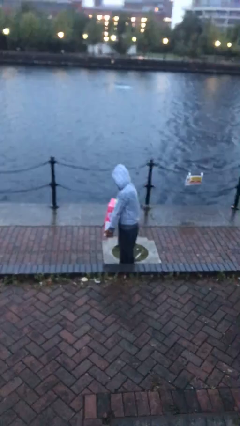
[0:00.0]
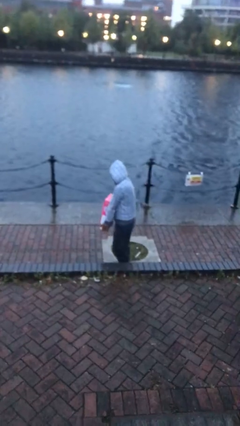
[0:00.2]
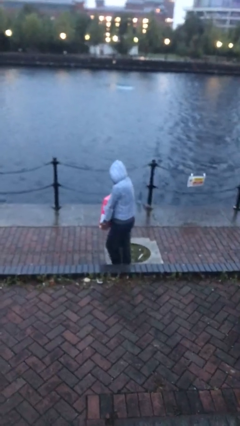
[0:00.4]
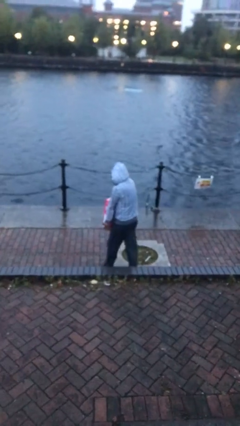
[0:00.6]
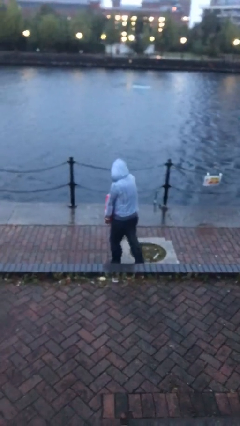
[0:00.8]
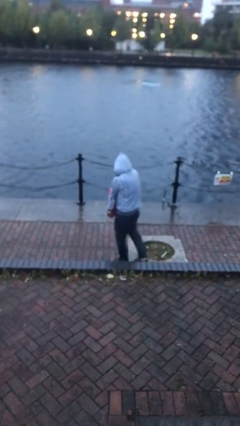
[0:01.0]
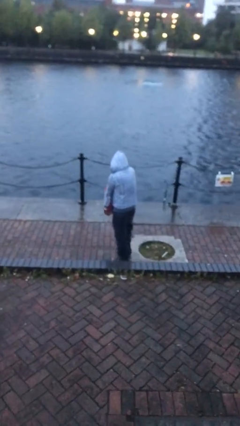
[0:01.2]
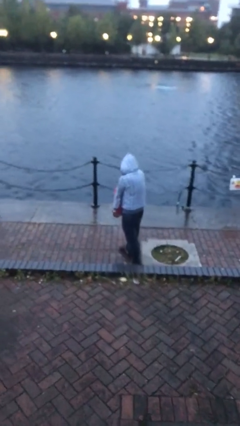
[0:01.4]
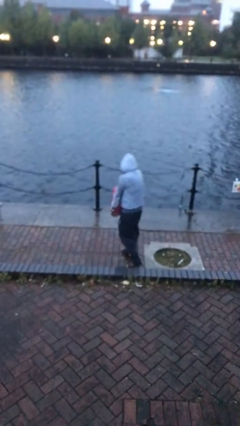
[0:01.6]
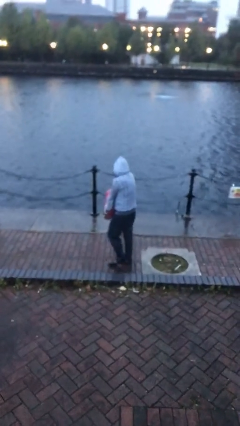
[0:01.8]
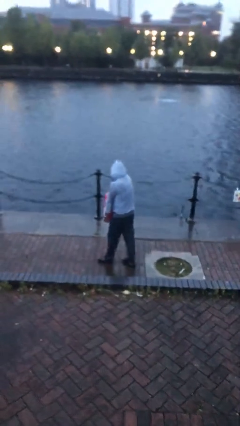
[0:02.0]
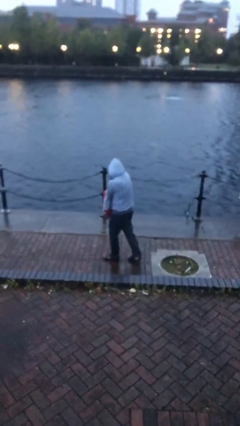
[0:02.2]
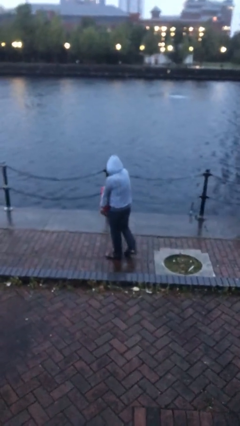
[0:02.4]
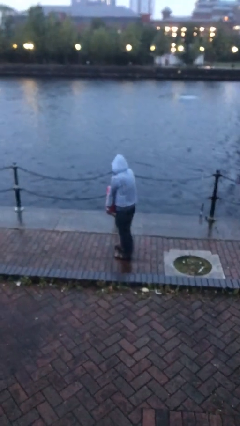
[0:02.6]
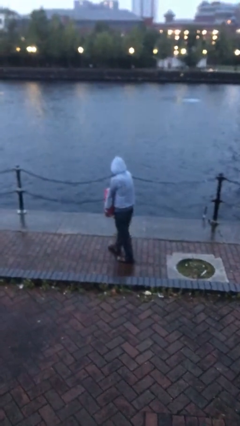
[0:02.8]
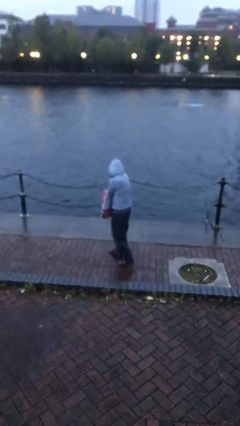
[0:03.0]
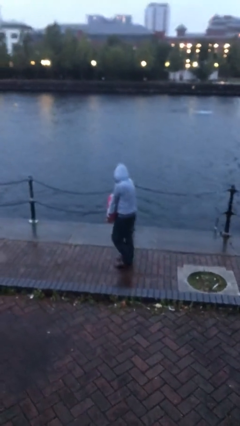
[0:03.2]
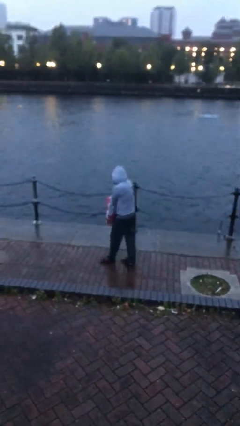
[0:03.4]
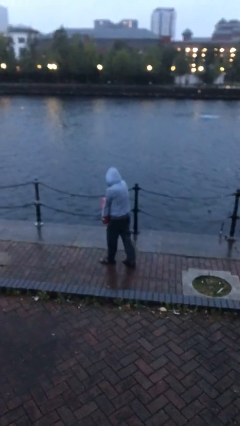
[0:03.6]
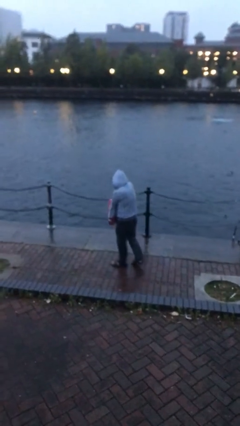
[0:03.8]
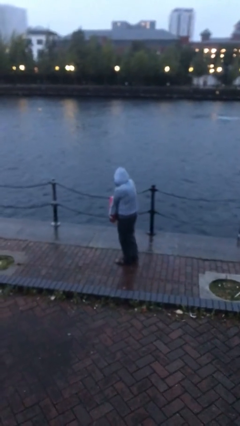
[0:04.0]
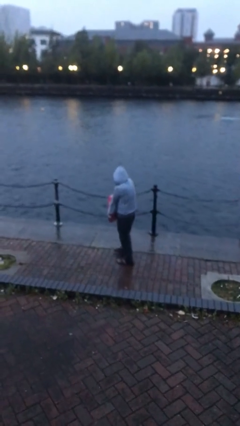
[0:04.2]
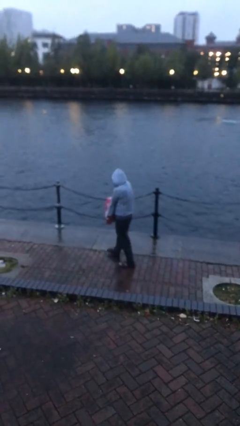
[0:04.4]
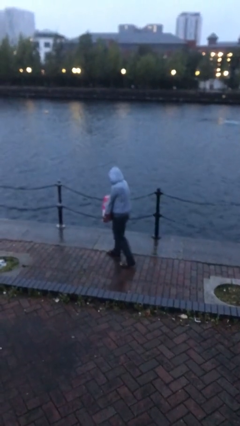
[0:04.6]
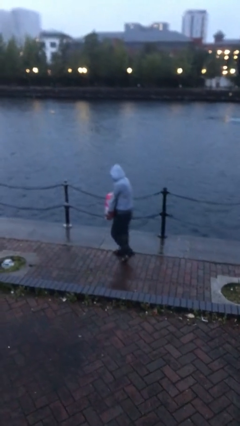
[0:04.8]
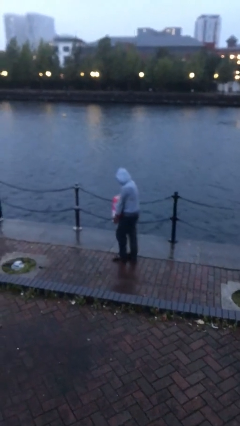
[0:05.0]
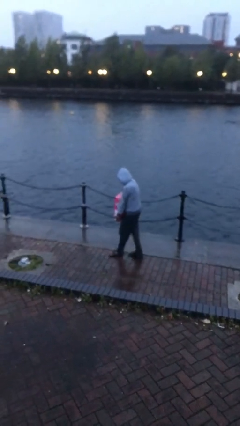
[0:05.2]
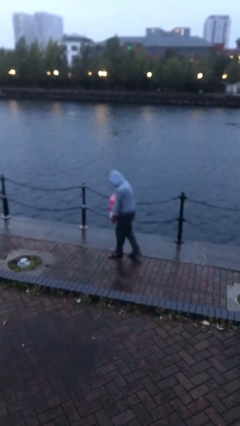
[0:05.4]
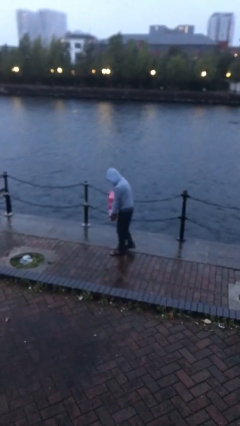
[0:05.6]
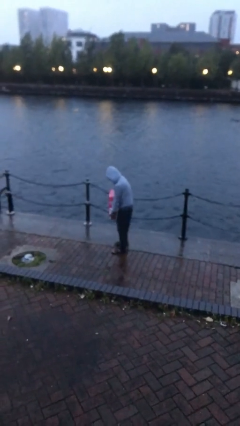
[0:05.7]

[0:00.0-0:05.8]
person carries heavy object

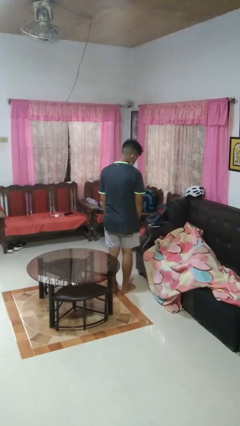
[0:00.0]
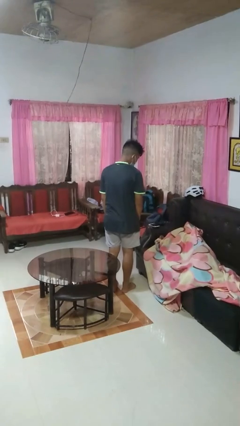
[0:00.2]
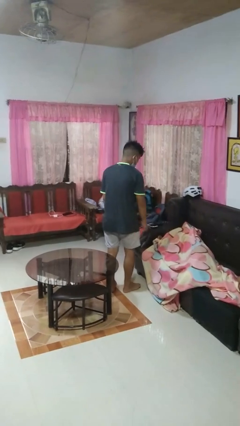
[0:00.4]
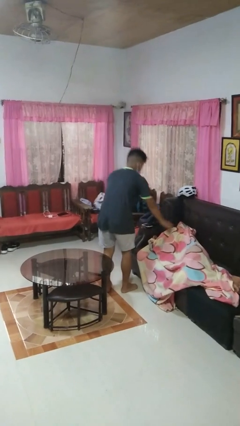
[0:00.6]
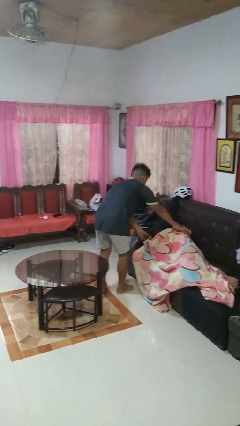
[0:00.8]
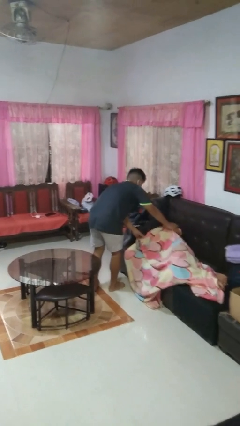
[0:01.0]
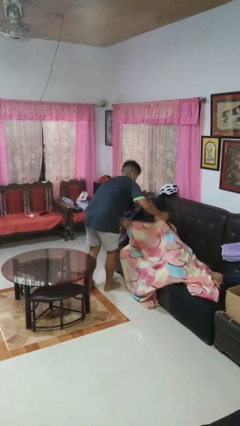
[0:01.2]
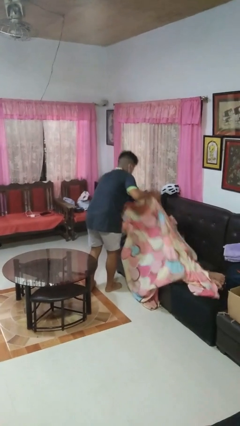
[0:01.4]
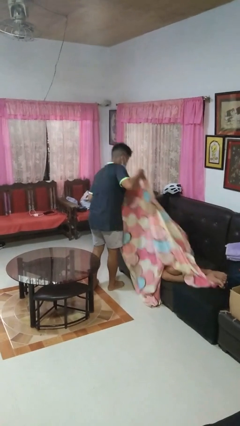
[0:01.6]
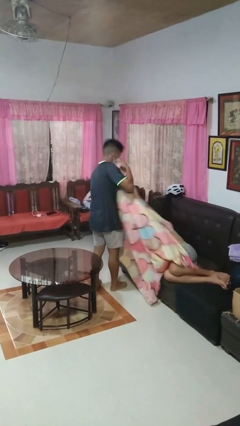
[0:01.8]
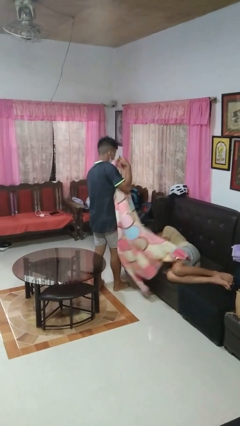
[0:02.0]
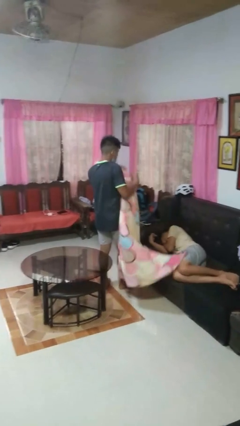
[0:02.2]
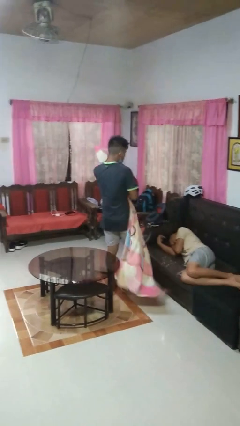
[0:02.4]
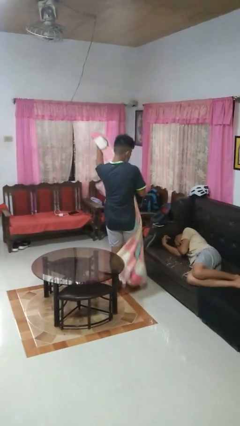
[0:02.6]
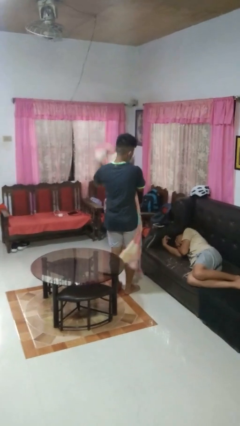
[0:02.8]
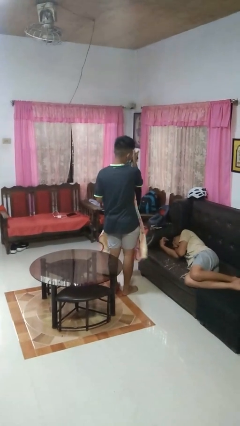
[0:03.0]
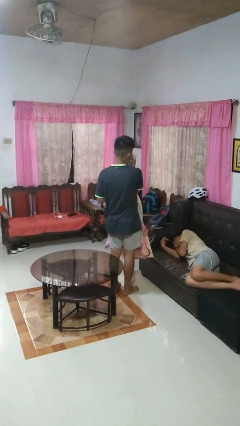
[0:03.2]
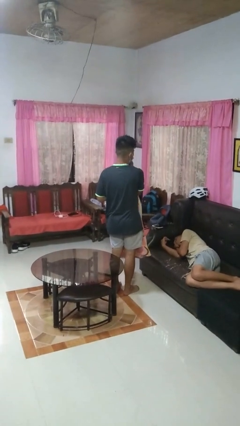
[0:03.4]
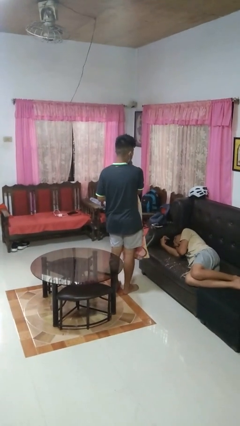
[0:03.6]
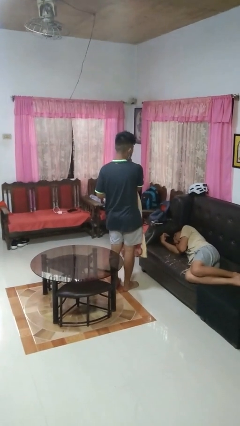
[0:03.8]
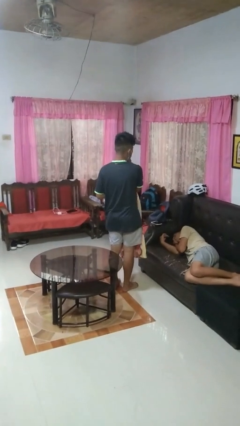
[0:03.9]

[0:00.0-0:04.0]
person uncovers friend with blanket

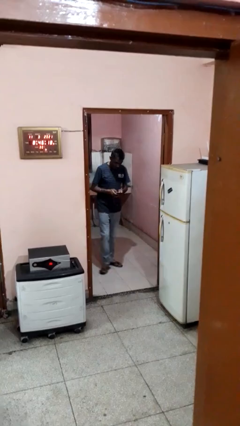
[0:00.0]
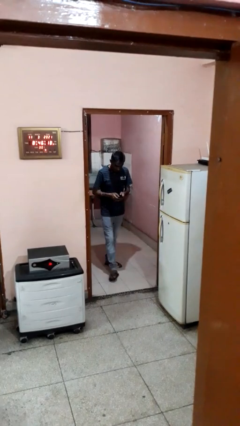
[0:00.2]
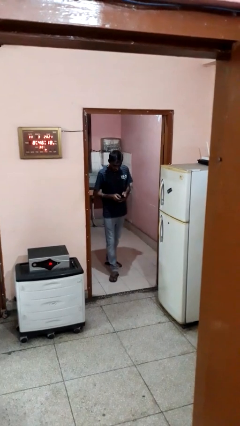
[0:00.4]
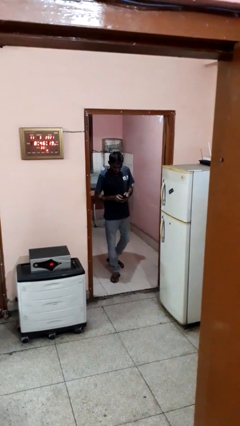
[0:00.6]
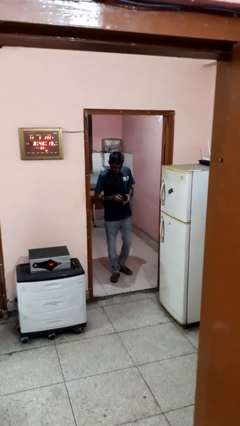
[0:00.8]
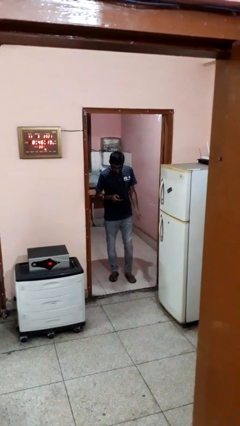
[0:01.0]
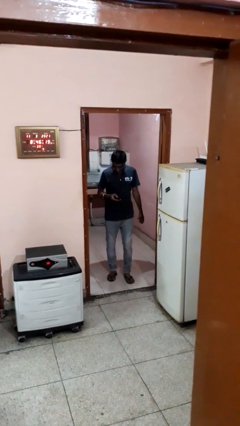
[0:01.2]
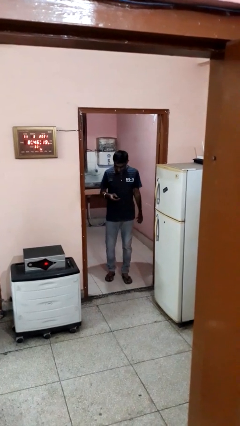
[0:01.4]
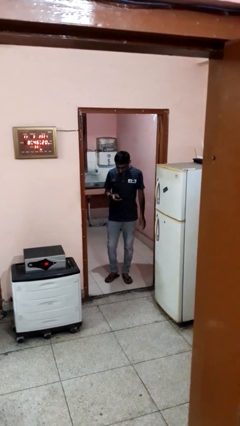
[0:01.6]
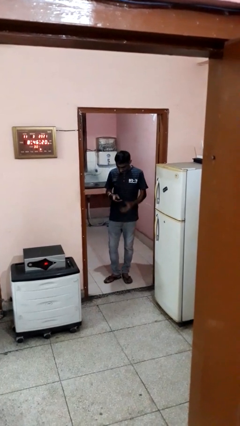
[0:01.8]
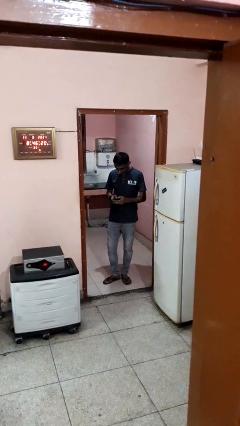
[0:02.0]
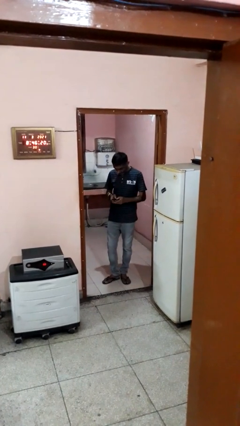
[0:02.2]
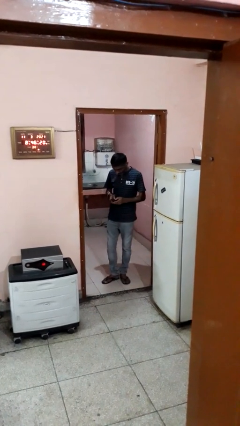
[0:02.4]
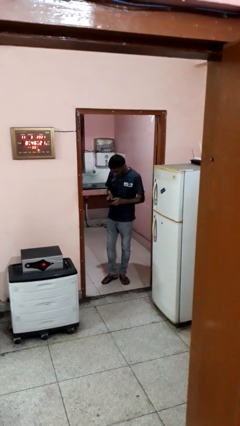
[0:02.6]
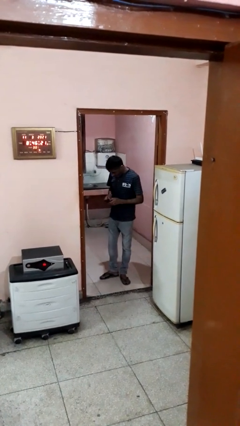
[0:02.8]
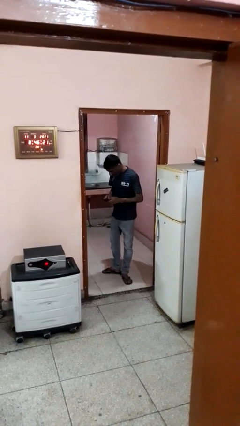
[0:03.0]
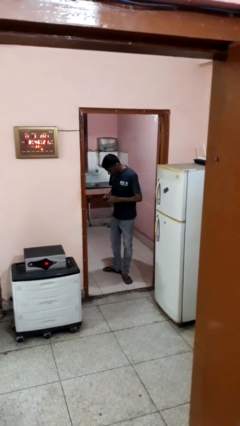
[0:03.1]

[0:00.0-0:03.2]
person enters scene through structure

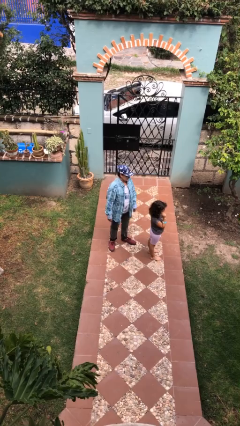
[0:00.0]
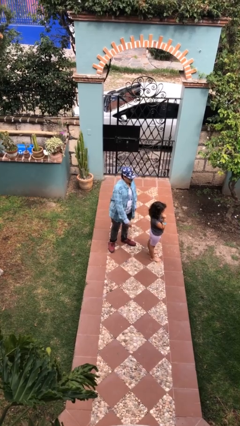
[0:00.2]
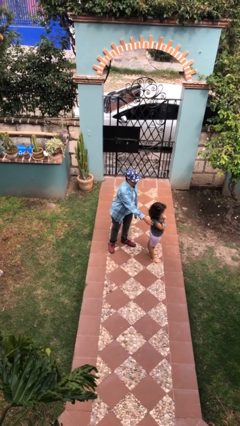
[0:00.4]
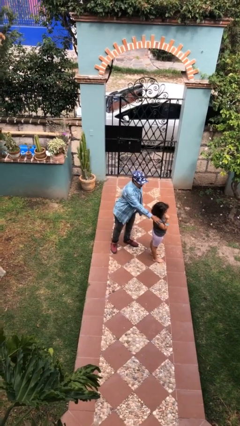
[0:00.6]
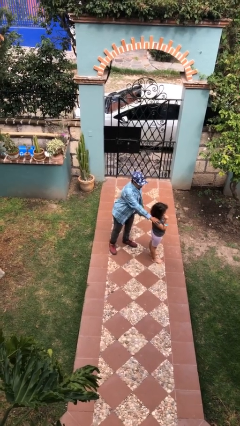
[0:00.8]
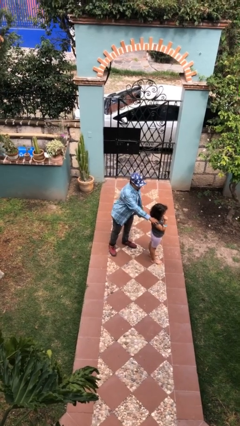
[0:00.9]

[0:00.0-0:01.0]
person grabs person by shoulder

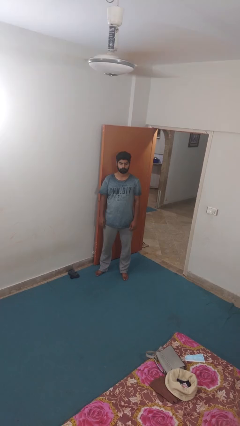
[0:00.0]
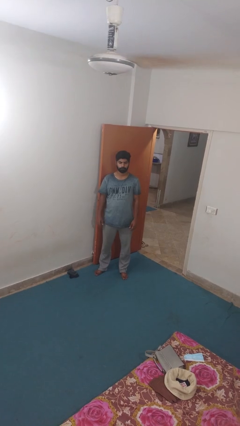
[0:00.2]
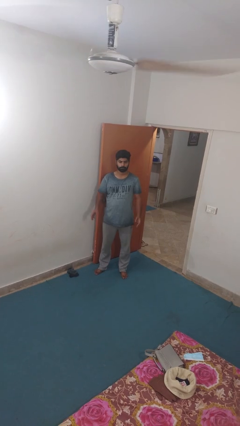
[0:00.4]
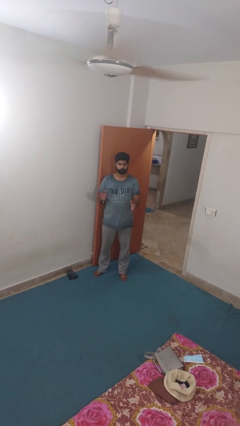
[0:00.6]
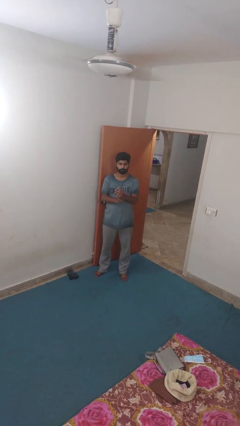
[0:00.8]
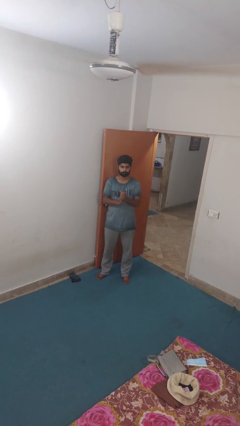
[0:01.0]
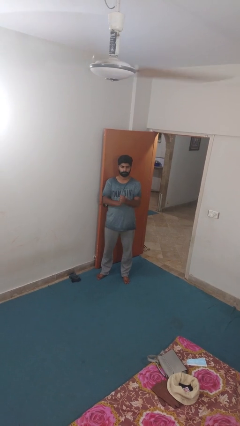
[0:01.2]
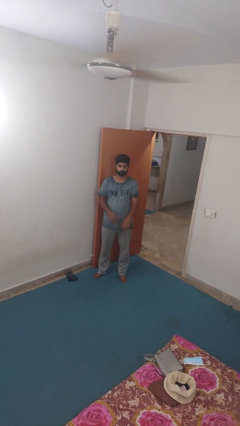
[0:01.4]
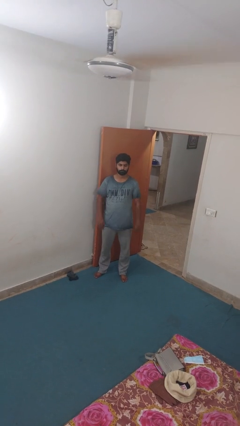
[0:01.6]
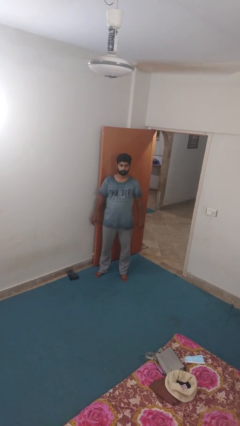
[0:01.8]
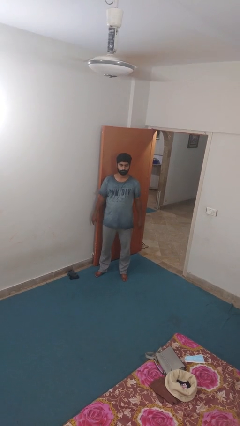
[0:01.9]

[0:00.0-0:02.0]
person claps hands

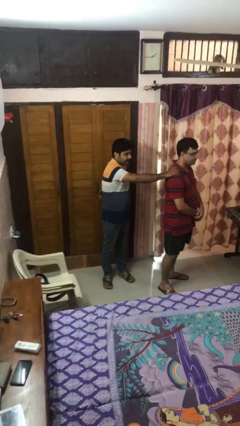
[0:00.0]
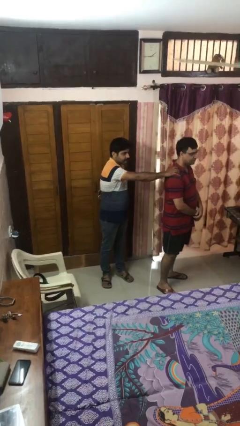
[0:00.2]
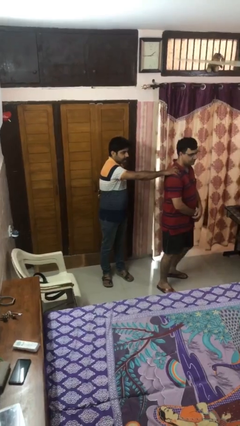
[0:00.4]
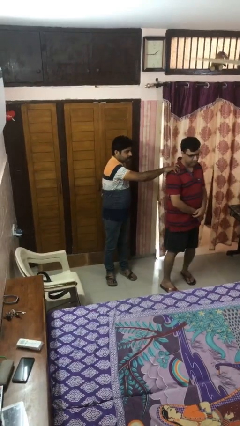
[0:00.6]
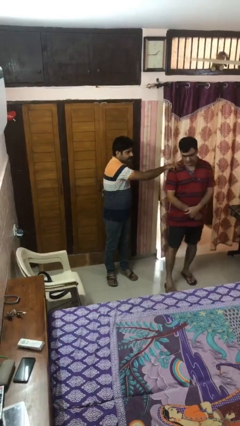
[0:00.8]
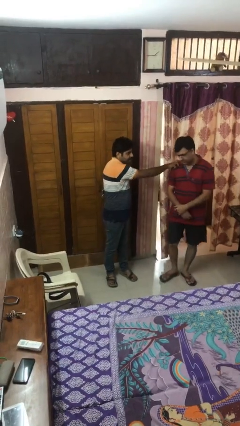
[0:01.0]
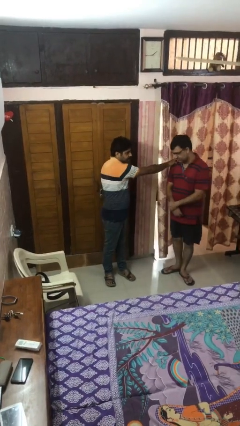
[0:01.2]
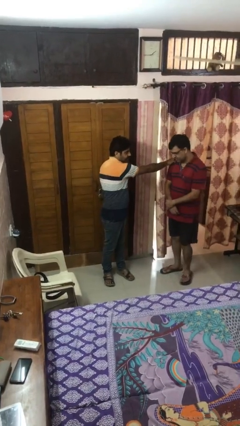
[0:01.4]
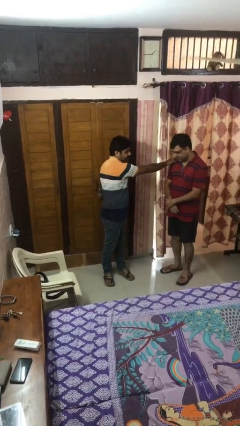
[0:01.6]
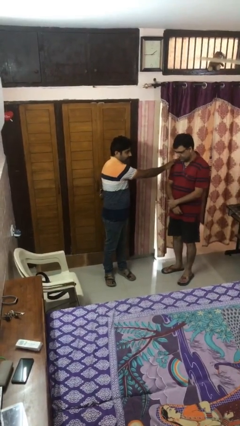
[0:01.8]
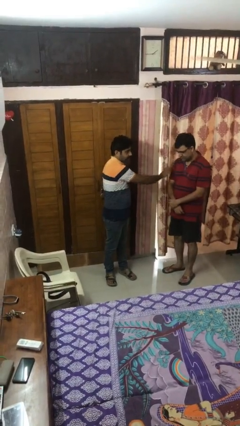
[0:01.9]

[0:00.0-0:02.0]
person spins person around
